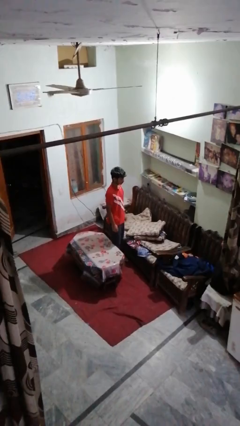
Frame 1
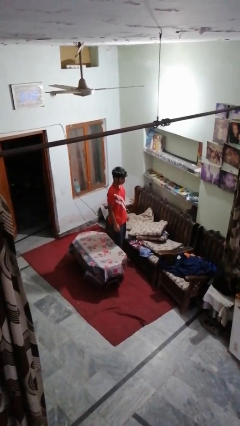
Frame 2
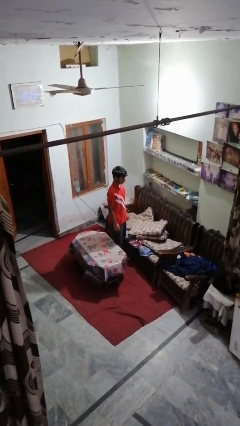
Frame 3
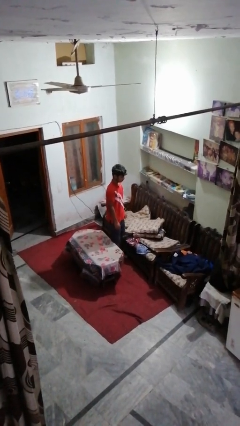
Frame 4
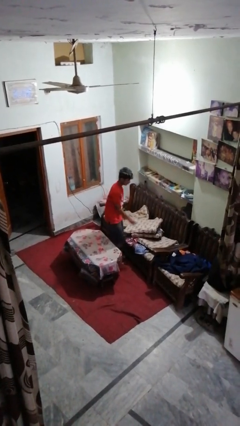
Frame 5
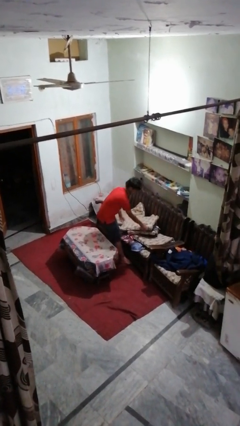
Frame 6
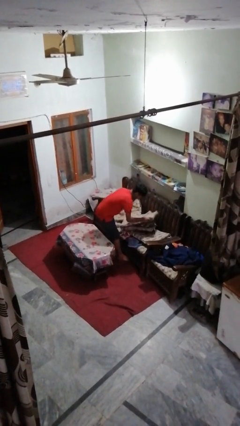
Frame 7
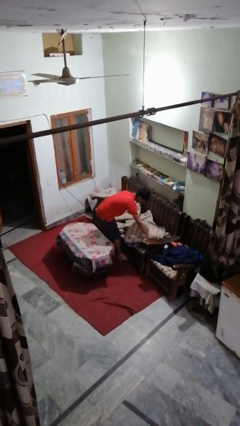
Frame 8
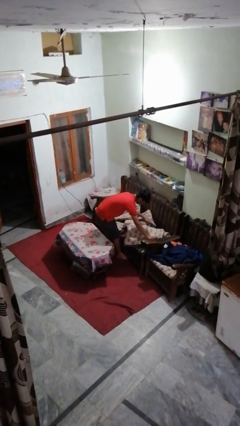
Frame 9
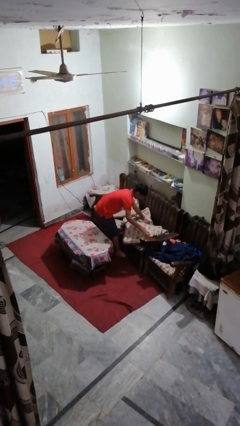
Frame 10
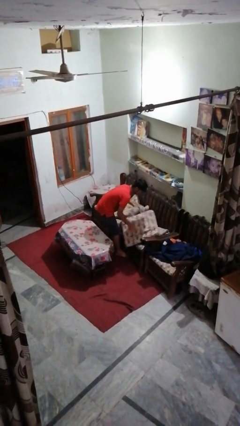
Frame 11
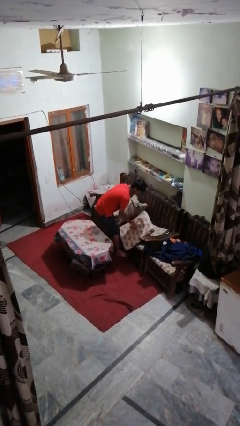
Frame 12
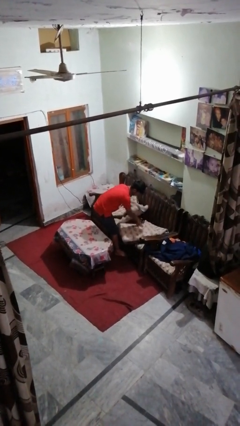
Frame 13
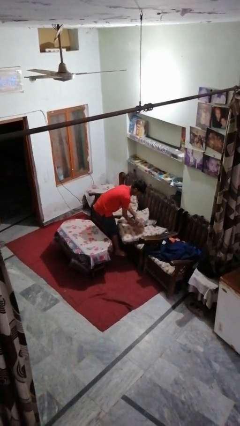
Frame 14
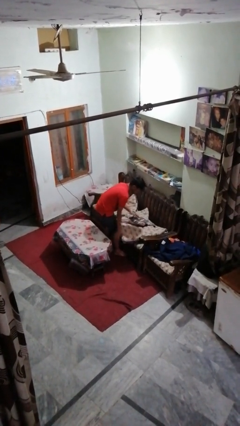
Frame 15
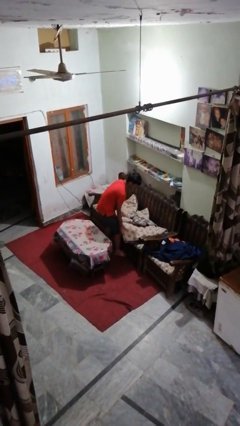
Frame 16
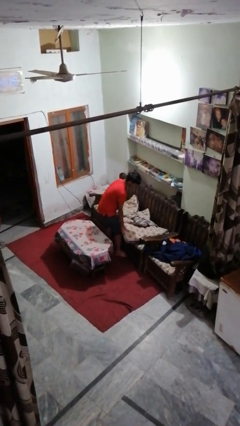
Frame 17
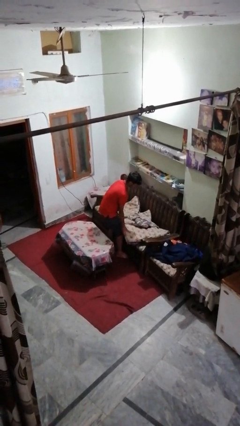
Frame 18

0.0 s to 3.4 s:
person searches in couch

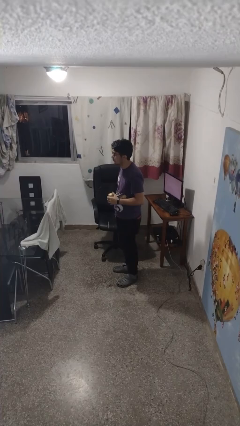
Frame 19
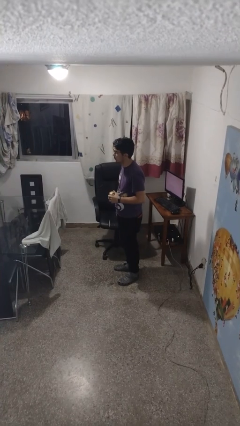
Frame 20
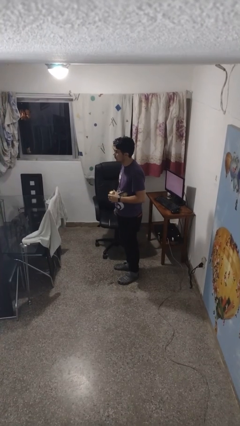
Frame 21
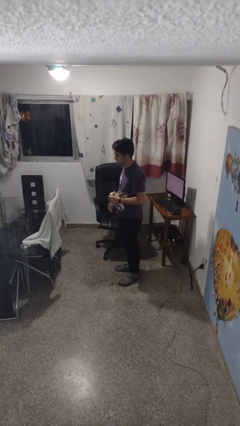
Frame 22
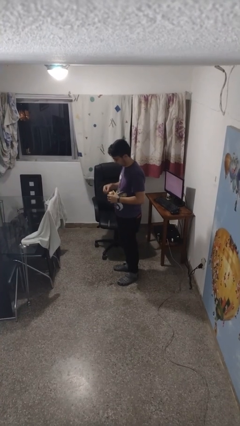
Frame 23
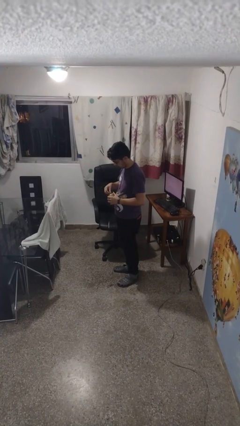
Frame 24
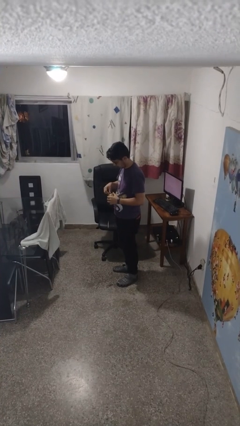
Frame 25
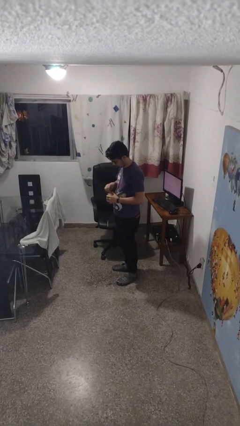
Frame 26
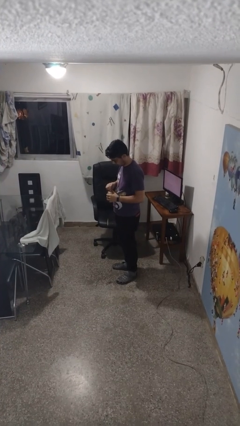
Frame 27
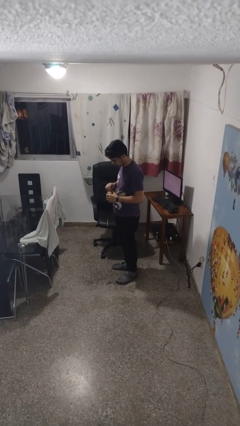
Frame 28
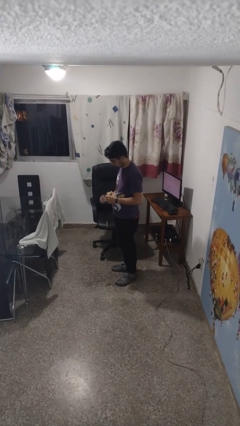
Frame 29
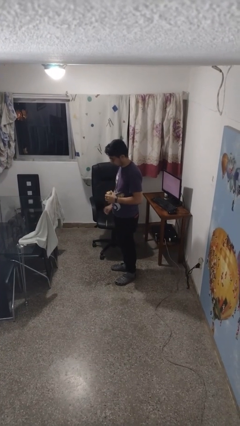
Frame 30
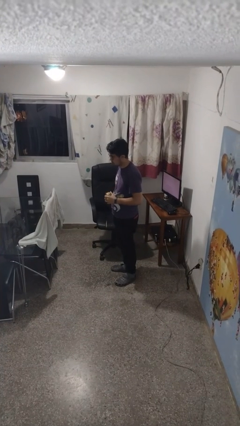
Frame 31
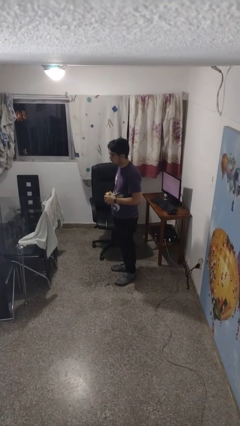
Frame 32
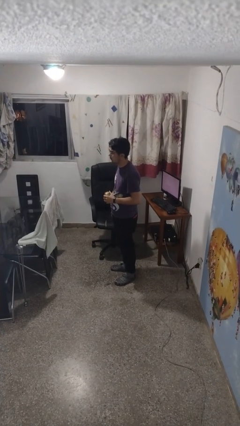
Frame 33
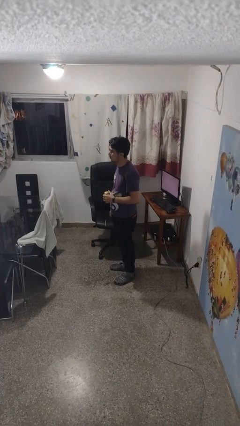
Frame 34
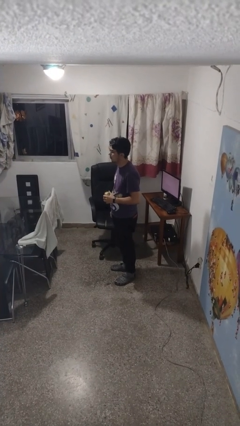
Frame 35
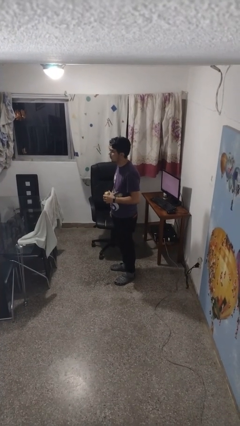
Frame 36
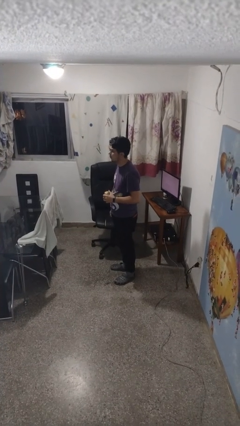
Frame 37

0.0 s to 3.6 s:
person opens beverage can

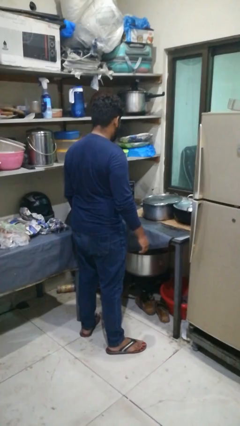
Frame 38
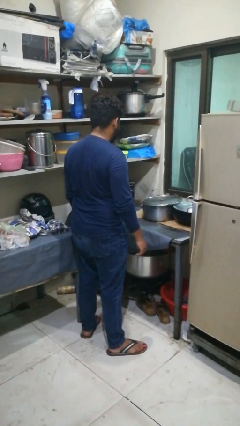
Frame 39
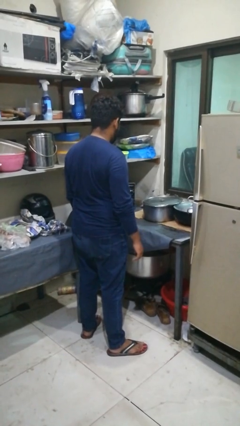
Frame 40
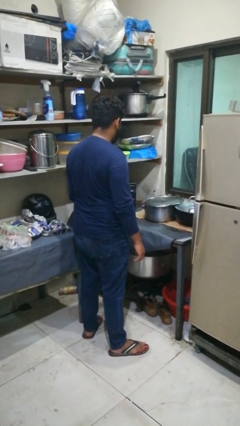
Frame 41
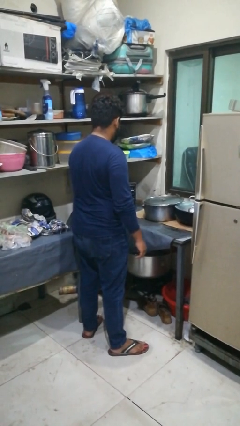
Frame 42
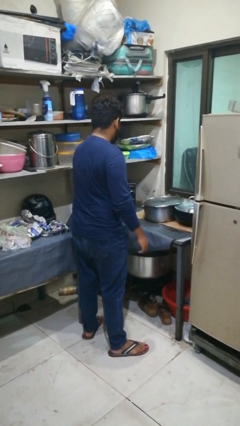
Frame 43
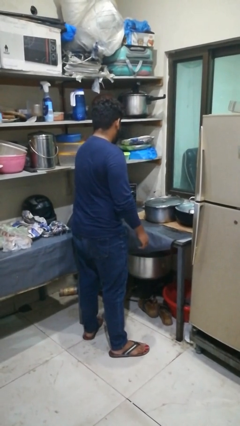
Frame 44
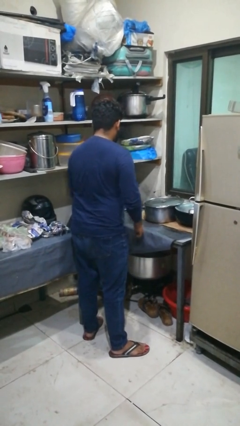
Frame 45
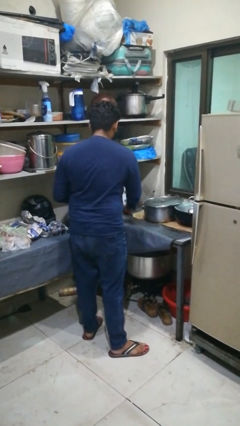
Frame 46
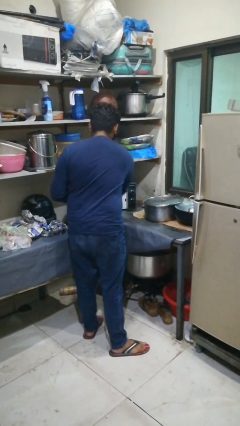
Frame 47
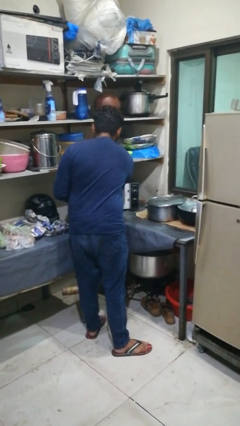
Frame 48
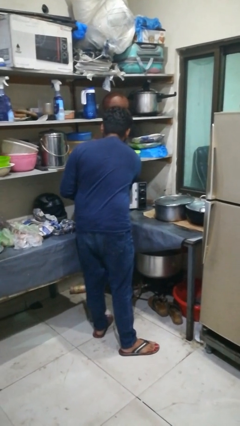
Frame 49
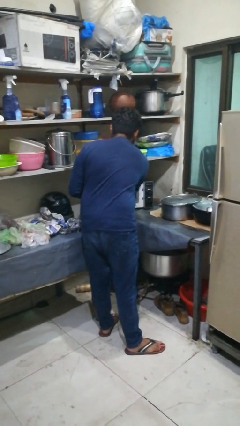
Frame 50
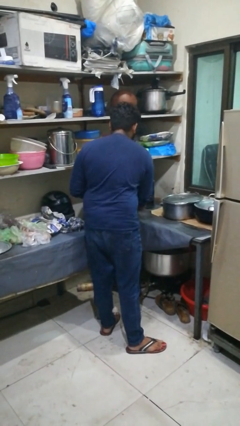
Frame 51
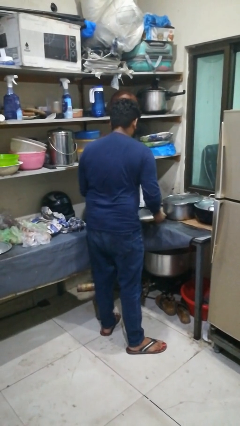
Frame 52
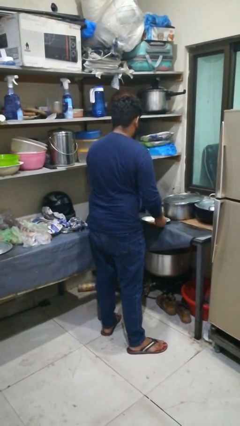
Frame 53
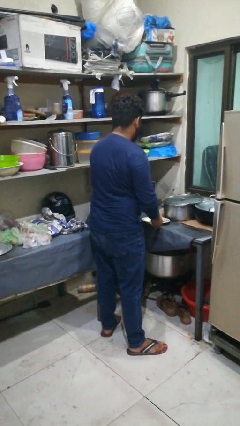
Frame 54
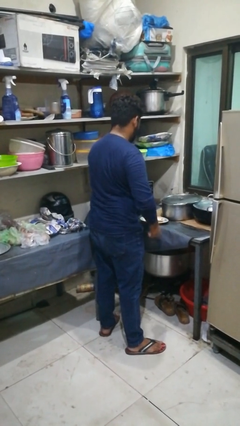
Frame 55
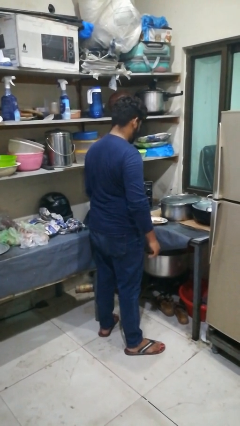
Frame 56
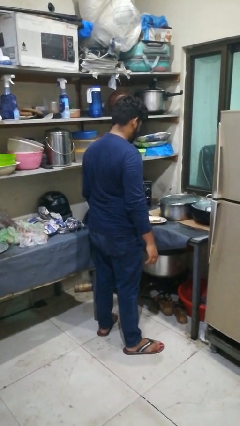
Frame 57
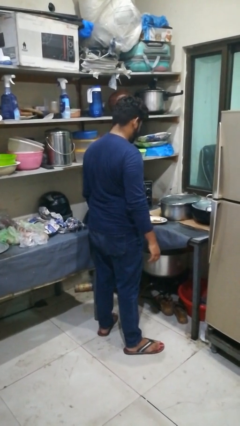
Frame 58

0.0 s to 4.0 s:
person takes object from oven

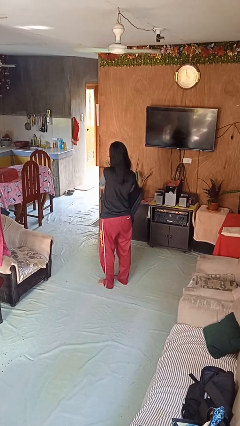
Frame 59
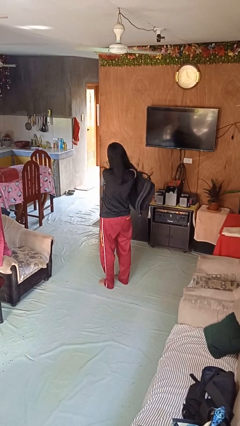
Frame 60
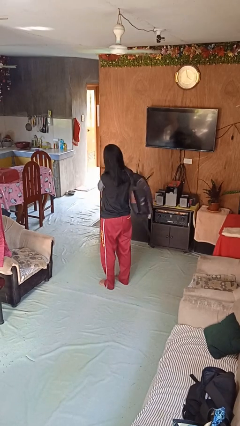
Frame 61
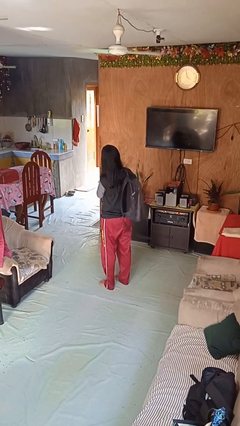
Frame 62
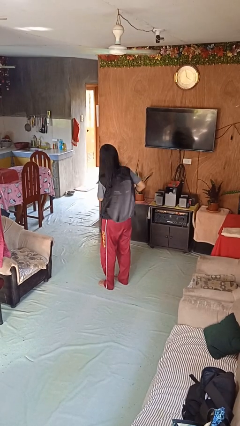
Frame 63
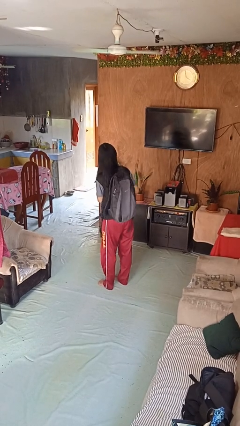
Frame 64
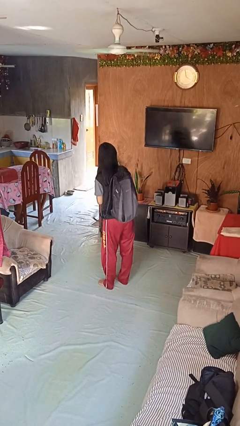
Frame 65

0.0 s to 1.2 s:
person puts on backpack

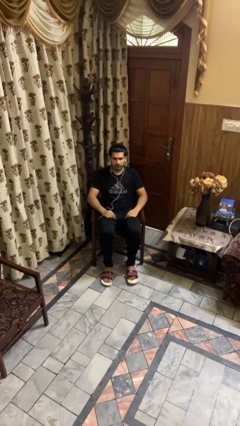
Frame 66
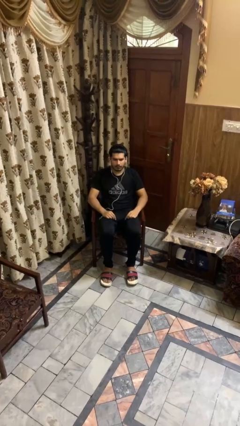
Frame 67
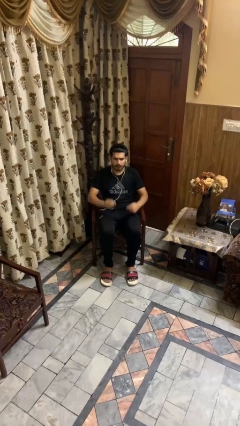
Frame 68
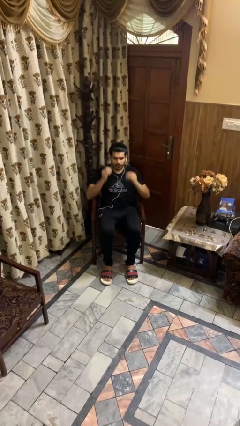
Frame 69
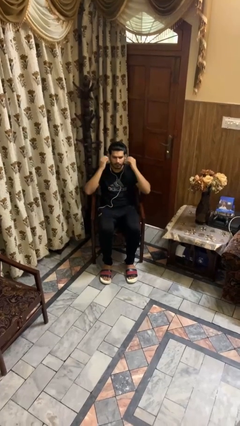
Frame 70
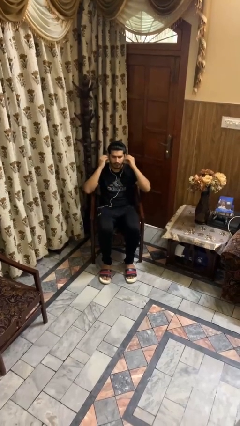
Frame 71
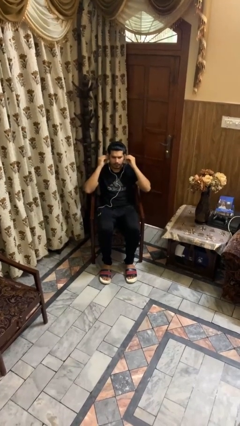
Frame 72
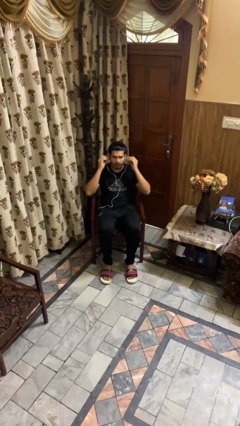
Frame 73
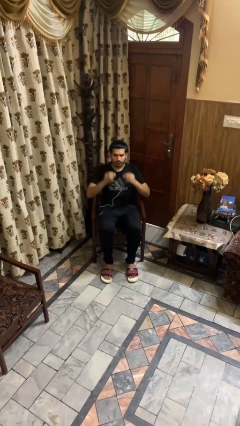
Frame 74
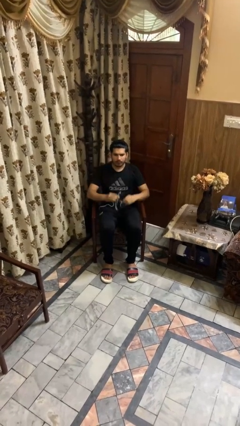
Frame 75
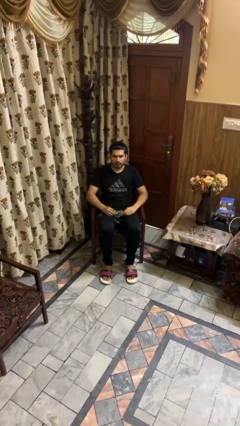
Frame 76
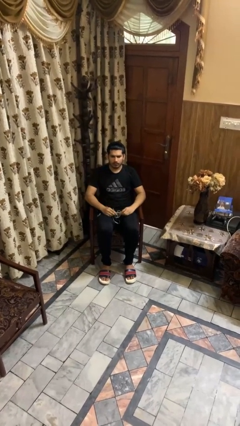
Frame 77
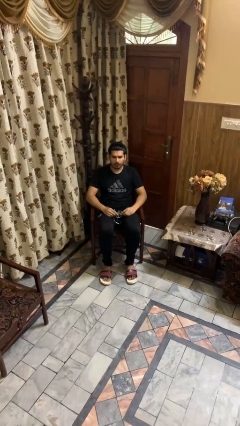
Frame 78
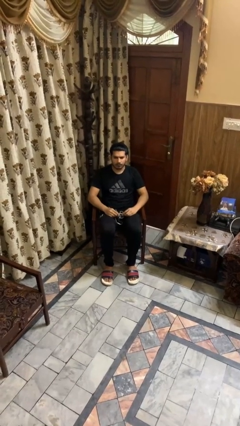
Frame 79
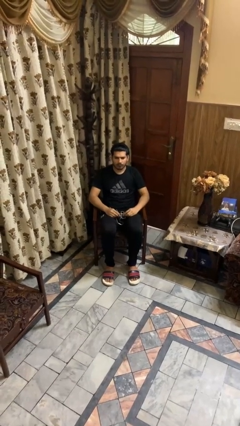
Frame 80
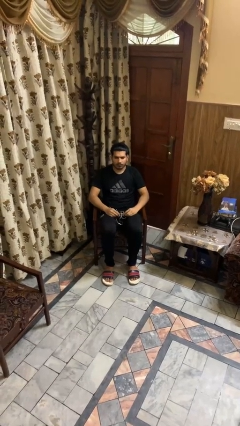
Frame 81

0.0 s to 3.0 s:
person takes off headphones

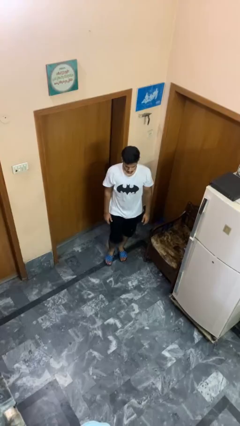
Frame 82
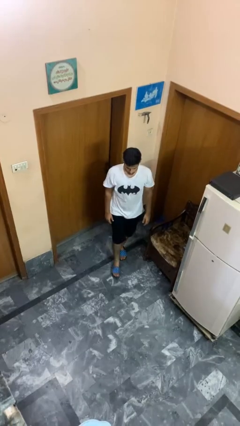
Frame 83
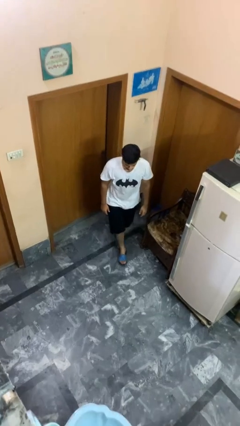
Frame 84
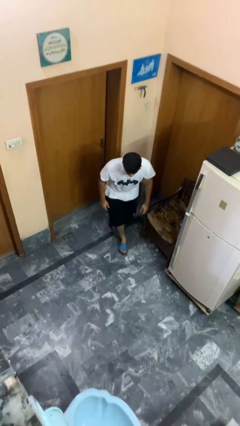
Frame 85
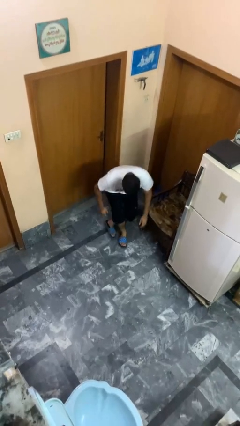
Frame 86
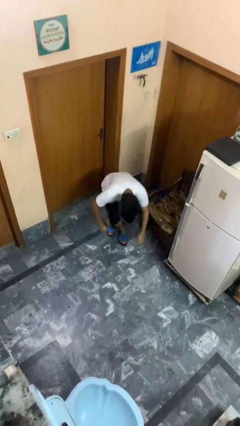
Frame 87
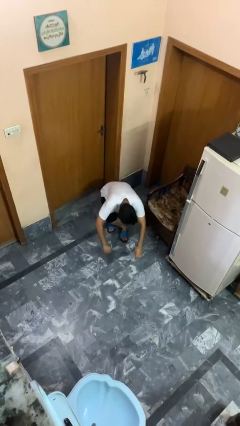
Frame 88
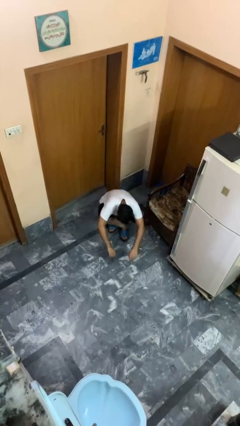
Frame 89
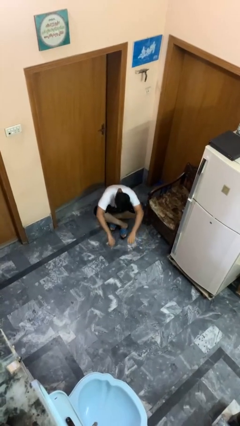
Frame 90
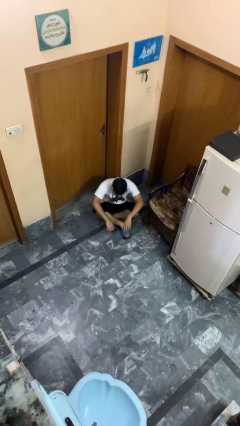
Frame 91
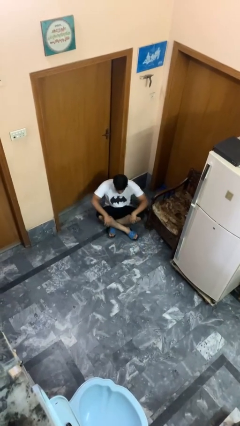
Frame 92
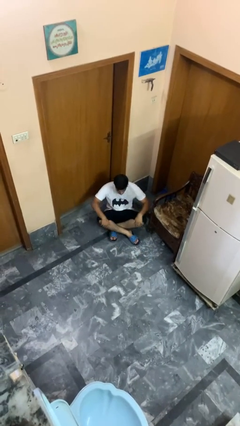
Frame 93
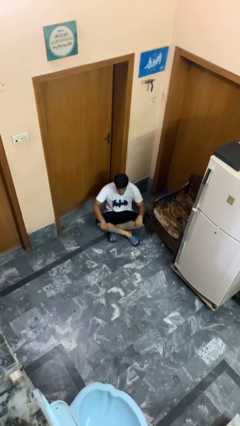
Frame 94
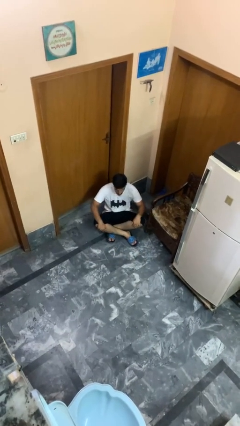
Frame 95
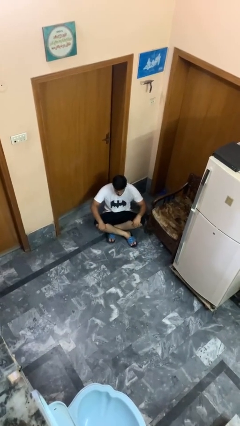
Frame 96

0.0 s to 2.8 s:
person sits crisscross
